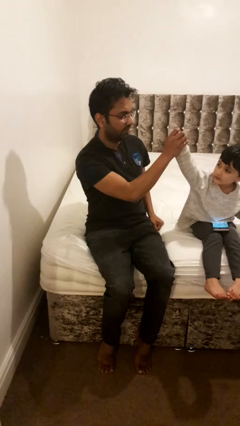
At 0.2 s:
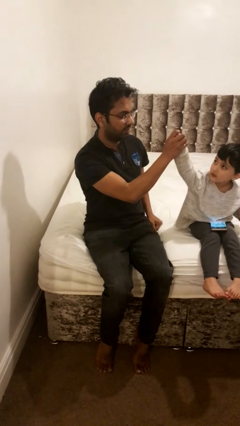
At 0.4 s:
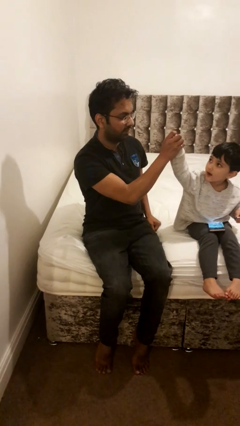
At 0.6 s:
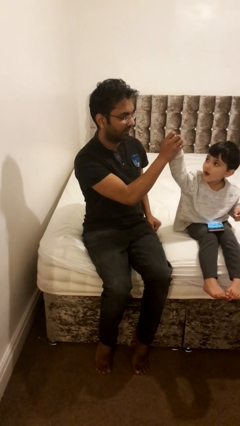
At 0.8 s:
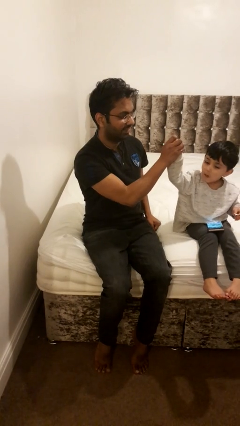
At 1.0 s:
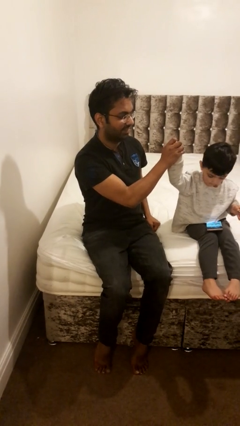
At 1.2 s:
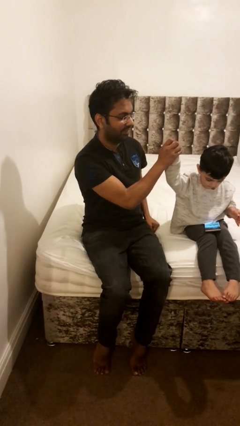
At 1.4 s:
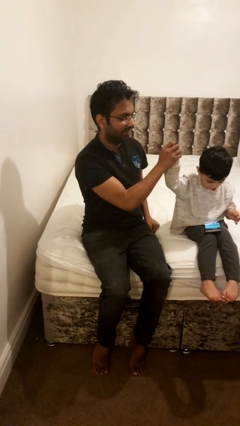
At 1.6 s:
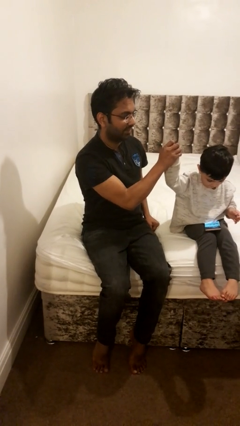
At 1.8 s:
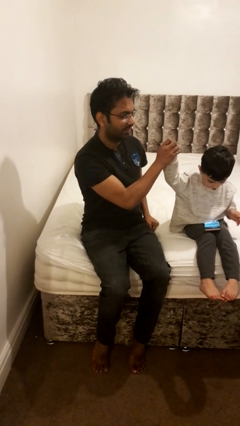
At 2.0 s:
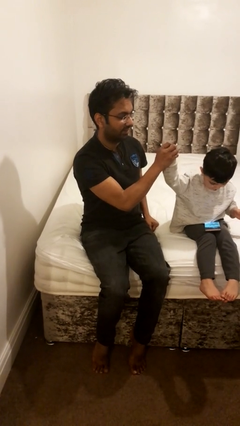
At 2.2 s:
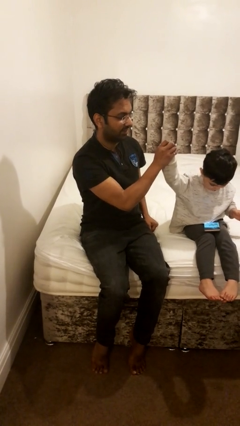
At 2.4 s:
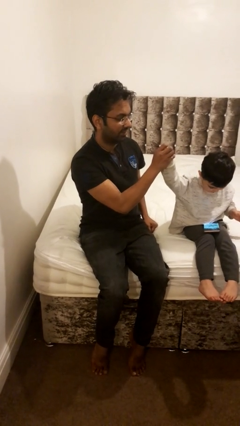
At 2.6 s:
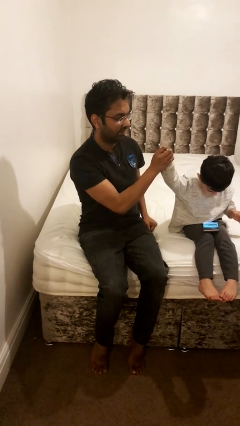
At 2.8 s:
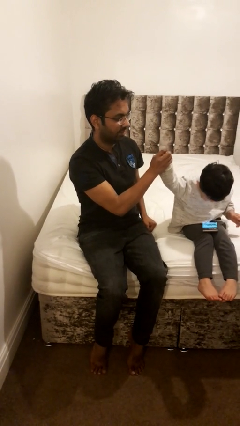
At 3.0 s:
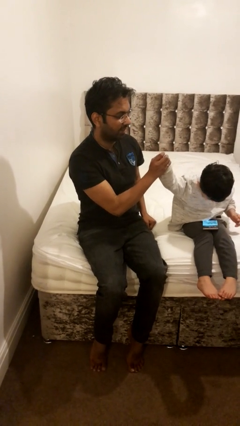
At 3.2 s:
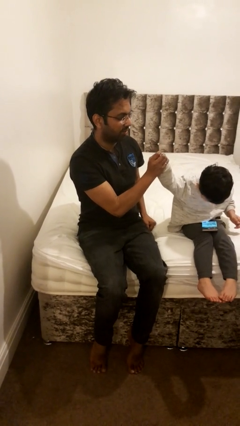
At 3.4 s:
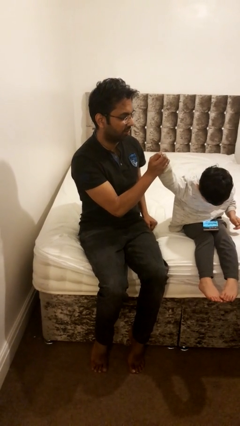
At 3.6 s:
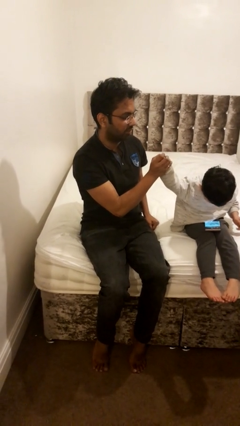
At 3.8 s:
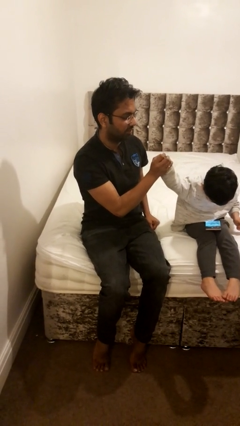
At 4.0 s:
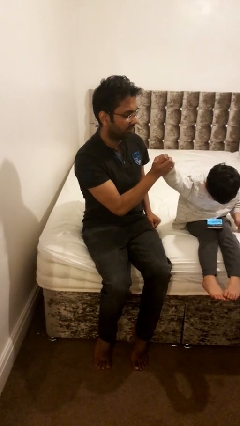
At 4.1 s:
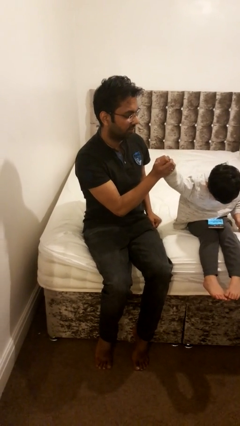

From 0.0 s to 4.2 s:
person highfives hand

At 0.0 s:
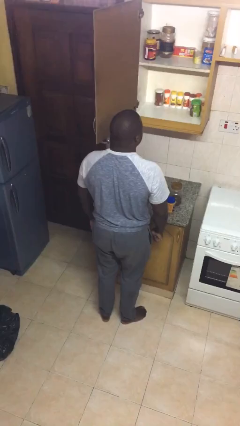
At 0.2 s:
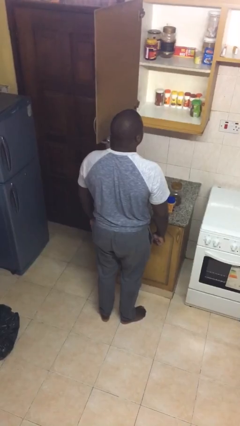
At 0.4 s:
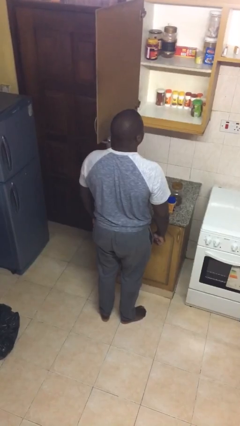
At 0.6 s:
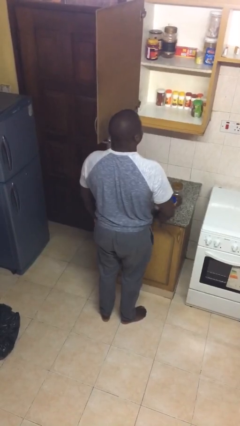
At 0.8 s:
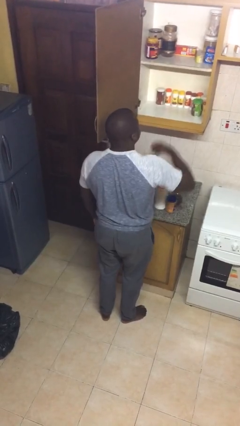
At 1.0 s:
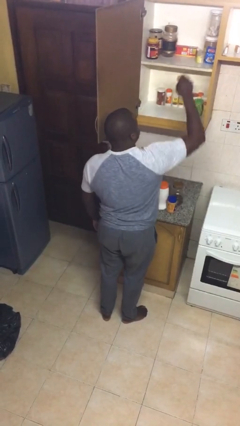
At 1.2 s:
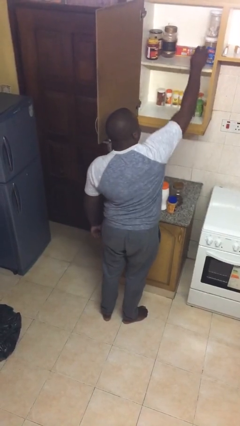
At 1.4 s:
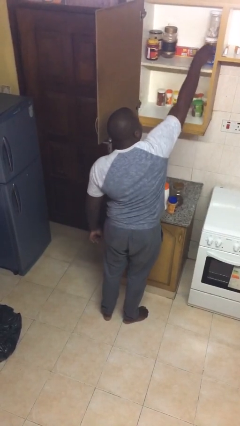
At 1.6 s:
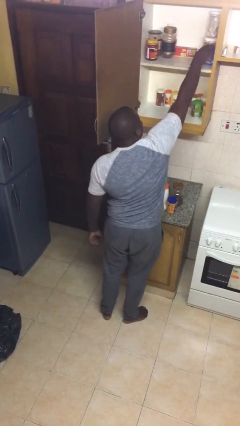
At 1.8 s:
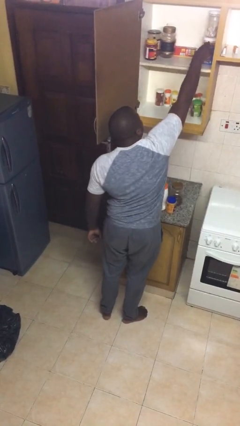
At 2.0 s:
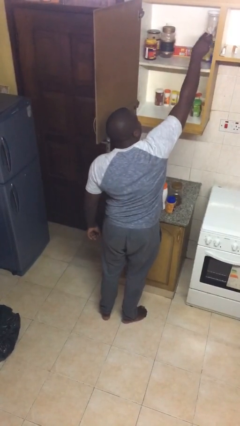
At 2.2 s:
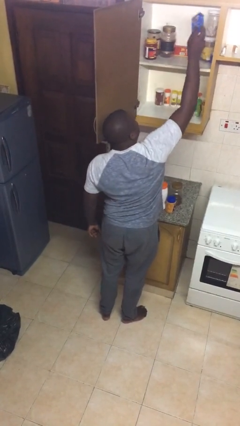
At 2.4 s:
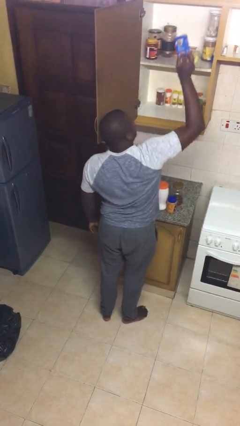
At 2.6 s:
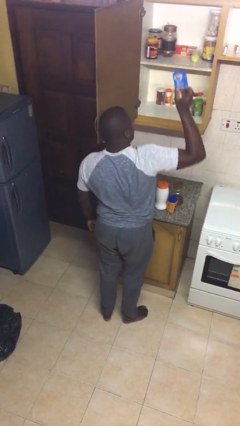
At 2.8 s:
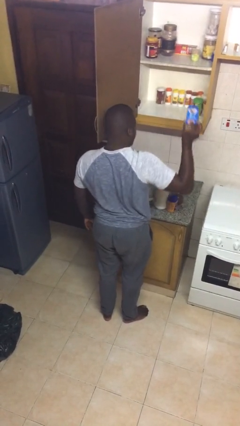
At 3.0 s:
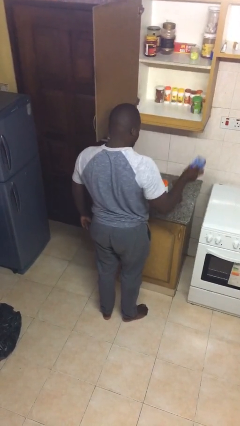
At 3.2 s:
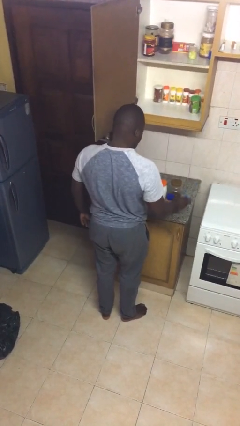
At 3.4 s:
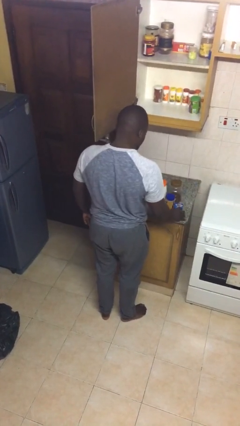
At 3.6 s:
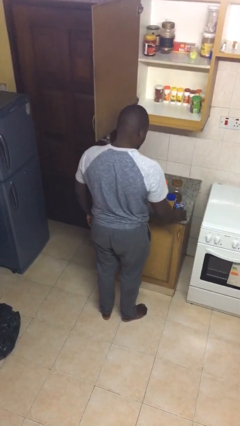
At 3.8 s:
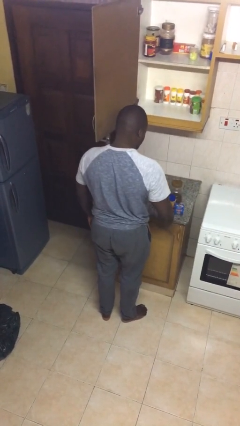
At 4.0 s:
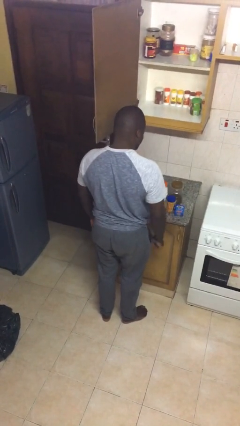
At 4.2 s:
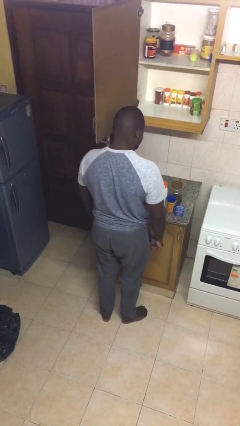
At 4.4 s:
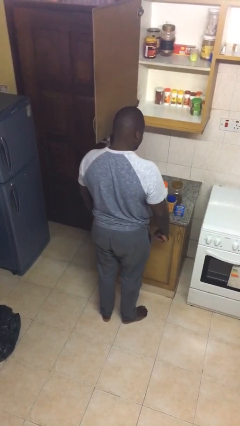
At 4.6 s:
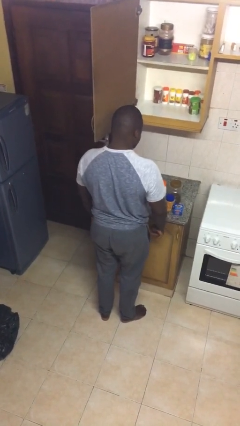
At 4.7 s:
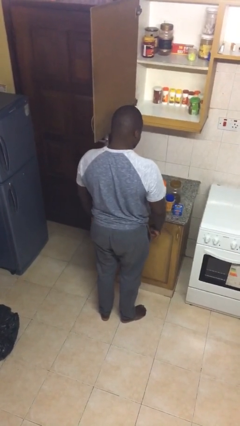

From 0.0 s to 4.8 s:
person takes object from cabinet

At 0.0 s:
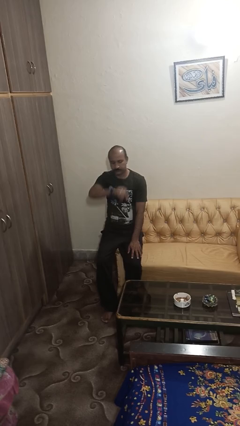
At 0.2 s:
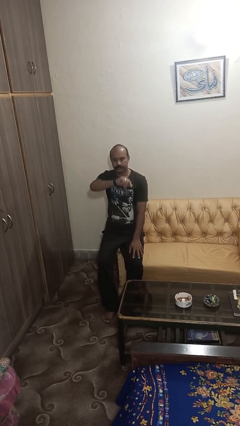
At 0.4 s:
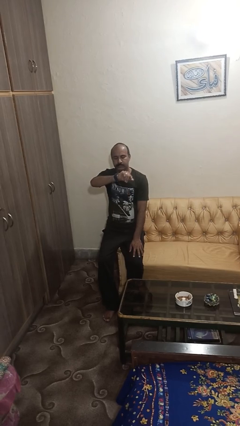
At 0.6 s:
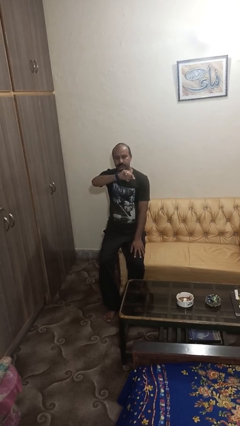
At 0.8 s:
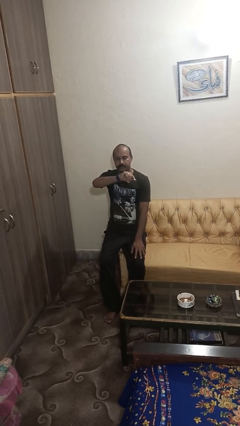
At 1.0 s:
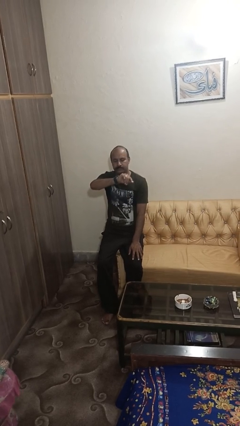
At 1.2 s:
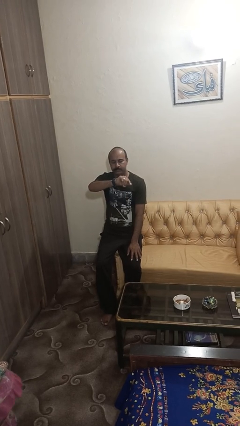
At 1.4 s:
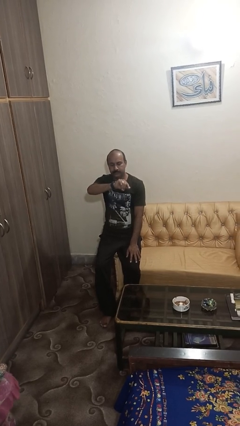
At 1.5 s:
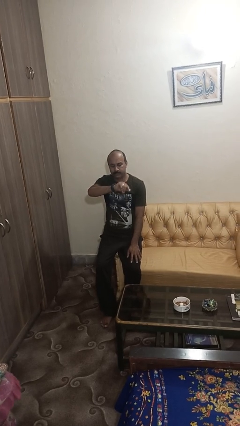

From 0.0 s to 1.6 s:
person looks at wristwatch

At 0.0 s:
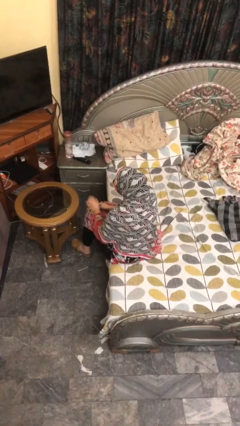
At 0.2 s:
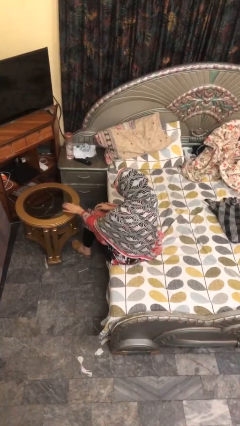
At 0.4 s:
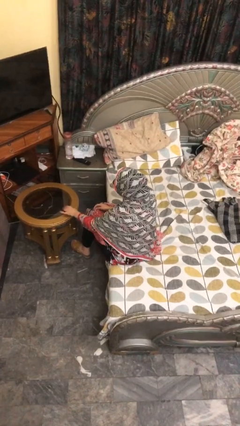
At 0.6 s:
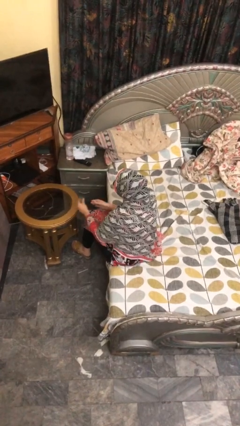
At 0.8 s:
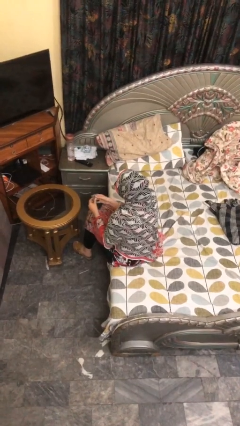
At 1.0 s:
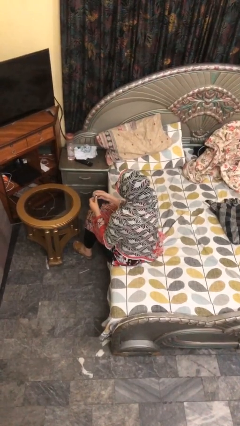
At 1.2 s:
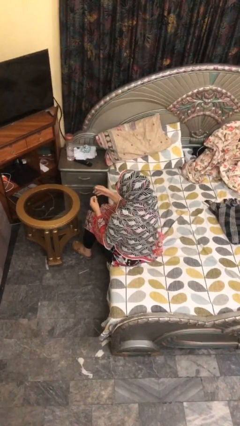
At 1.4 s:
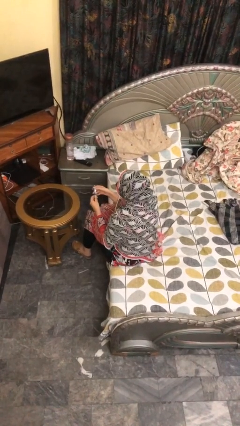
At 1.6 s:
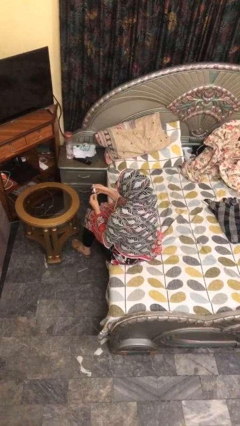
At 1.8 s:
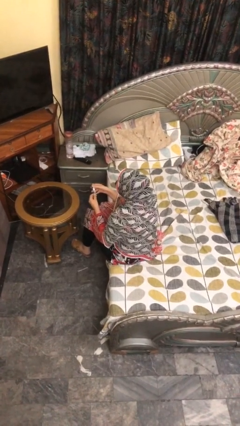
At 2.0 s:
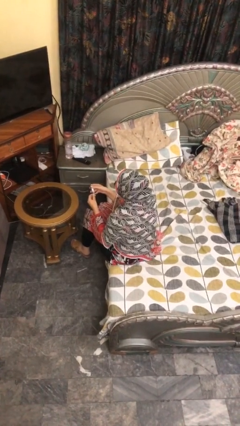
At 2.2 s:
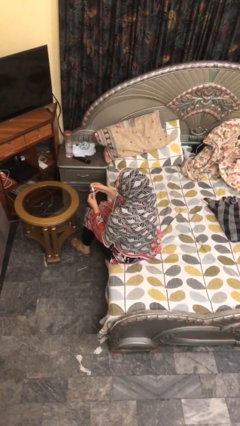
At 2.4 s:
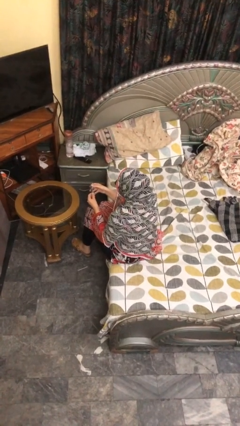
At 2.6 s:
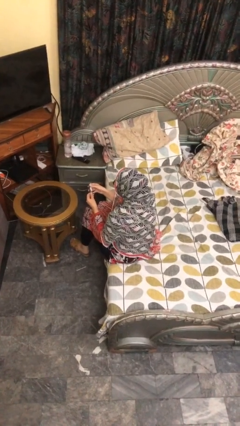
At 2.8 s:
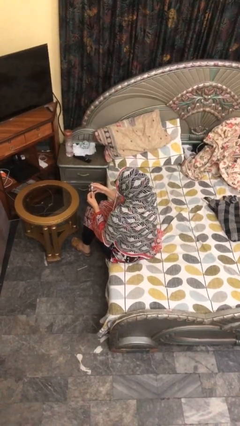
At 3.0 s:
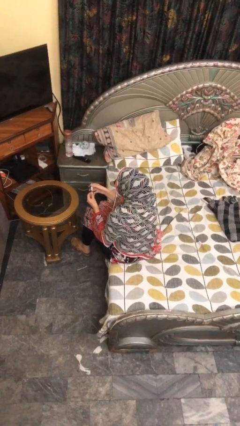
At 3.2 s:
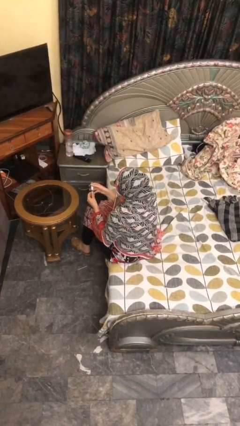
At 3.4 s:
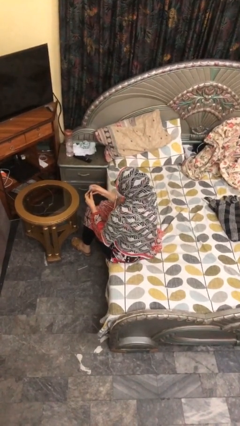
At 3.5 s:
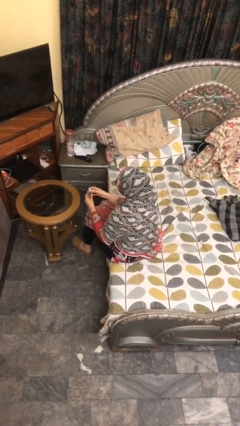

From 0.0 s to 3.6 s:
person clips fingernails

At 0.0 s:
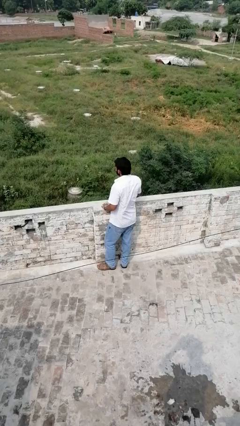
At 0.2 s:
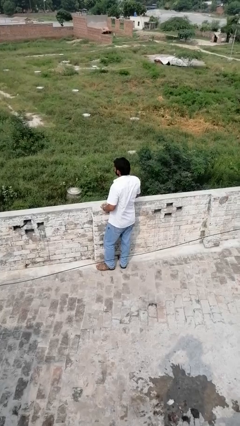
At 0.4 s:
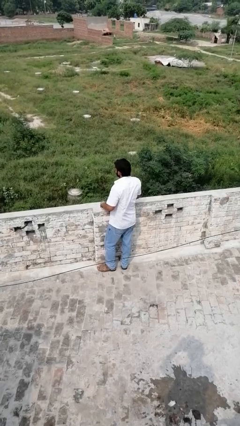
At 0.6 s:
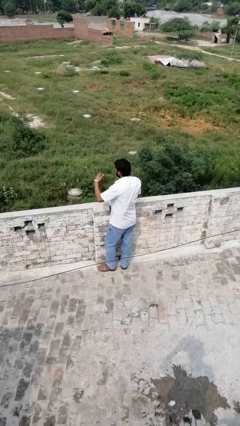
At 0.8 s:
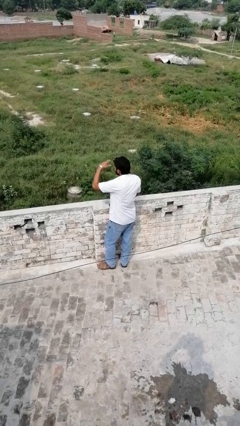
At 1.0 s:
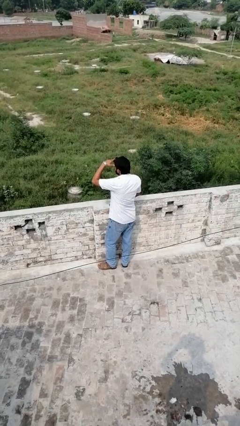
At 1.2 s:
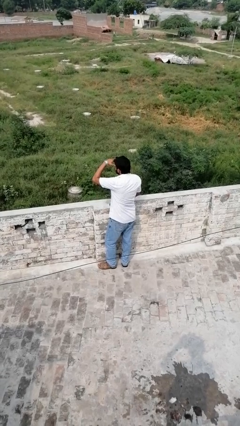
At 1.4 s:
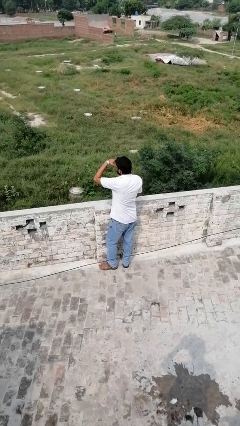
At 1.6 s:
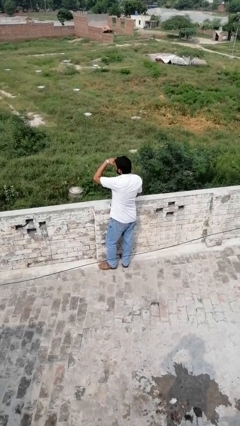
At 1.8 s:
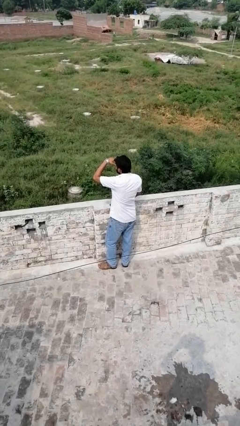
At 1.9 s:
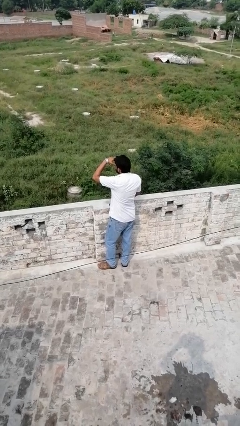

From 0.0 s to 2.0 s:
person shades eyes

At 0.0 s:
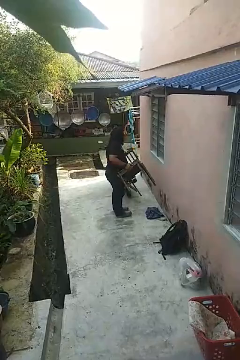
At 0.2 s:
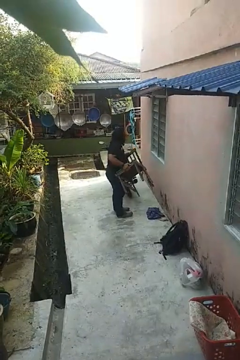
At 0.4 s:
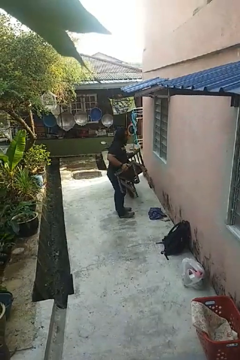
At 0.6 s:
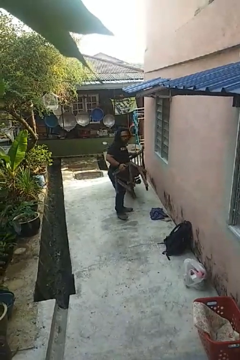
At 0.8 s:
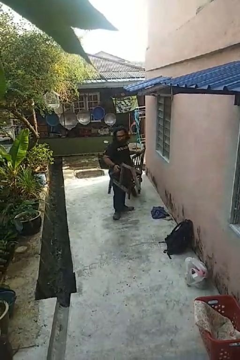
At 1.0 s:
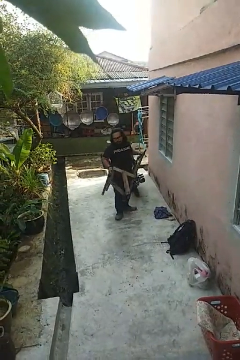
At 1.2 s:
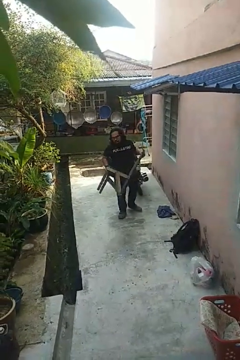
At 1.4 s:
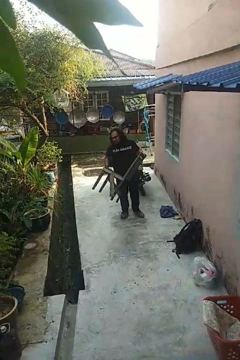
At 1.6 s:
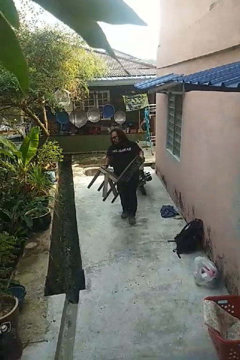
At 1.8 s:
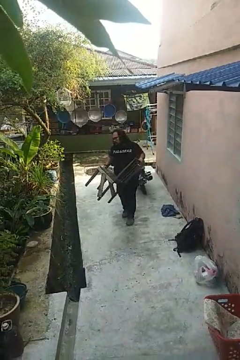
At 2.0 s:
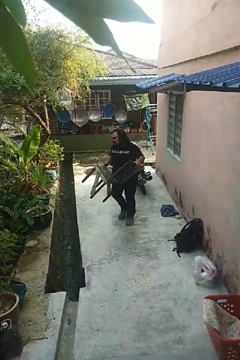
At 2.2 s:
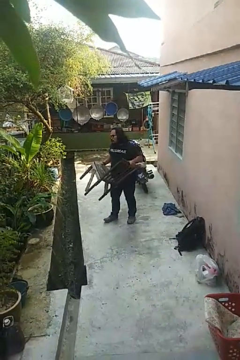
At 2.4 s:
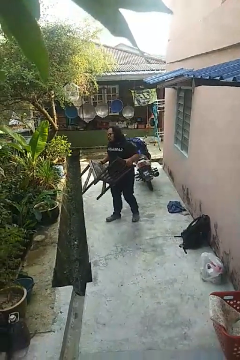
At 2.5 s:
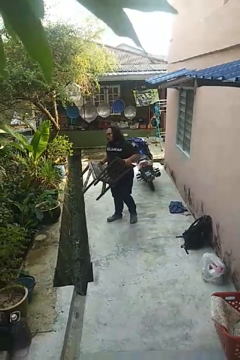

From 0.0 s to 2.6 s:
person carries furniture
